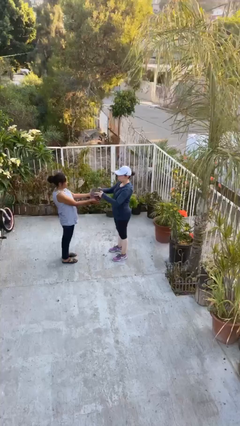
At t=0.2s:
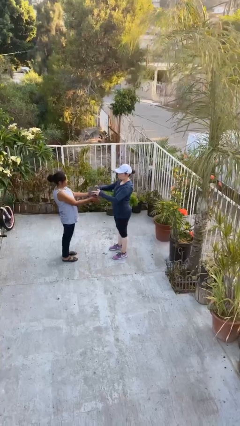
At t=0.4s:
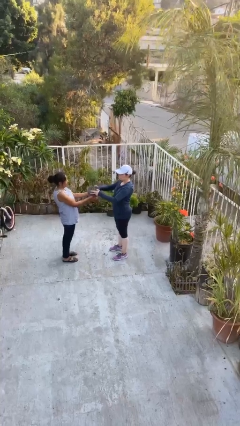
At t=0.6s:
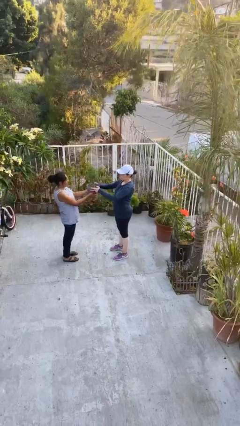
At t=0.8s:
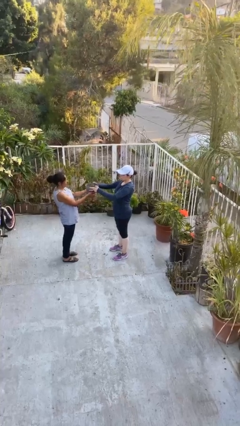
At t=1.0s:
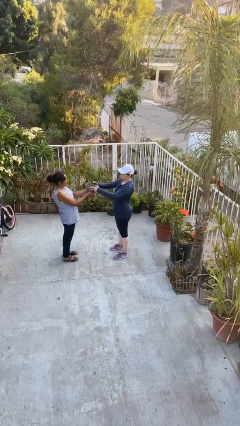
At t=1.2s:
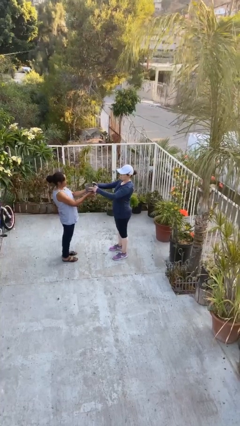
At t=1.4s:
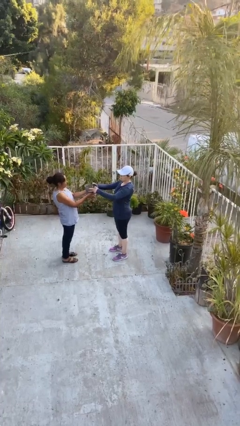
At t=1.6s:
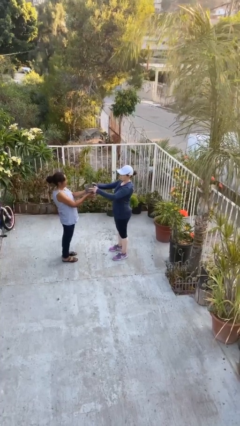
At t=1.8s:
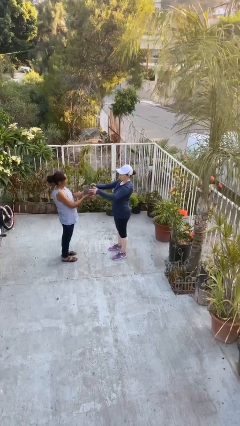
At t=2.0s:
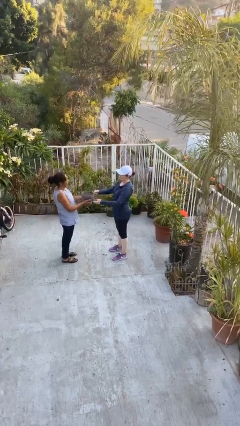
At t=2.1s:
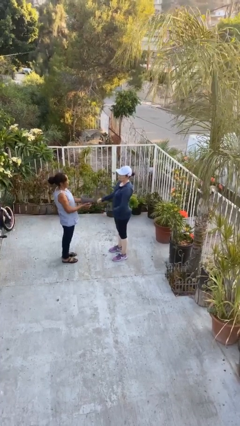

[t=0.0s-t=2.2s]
person transfers object to person

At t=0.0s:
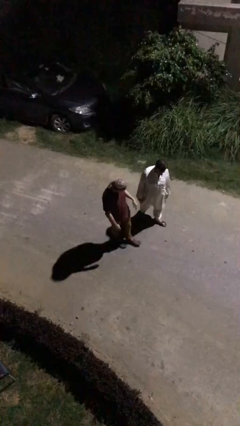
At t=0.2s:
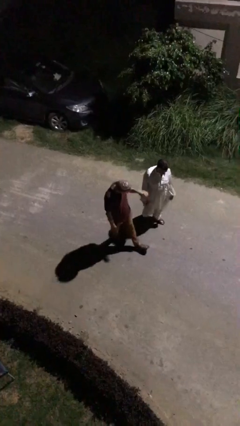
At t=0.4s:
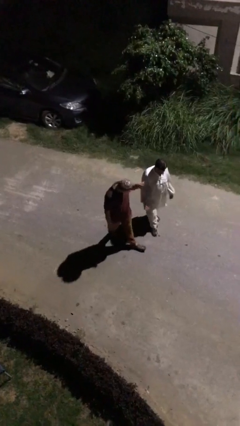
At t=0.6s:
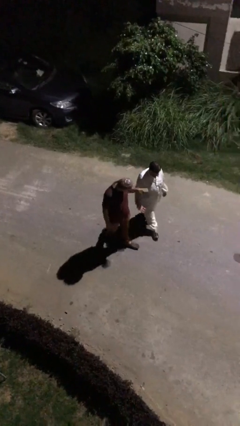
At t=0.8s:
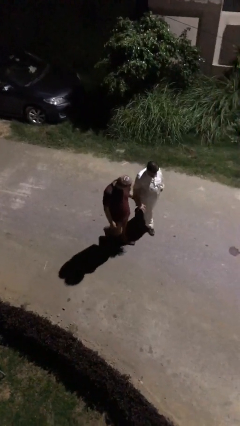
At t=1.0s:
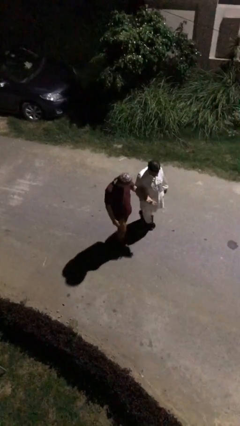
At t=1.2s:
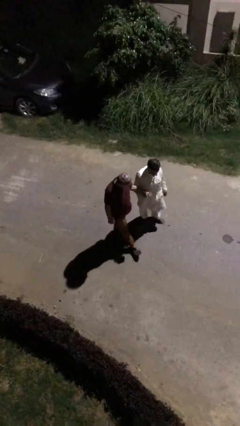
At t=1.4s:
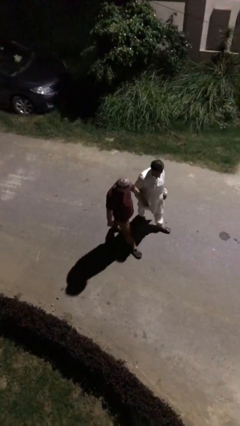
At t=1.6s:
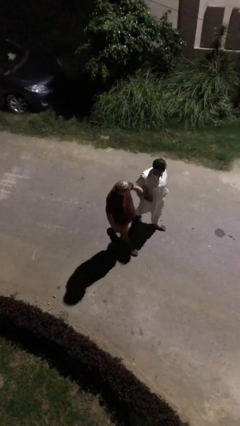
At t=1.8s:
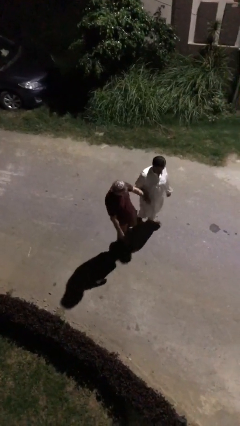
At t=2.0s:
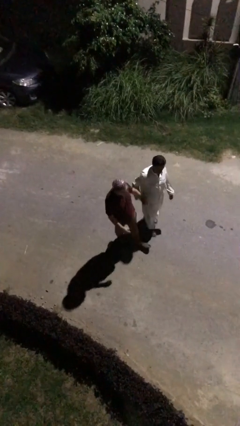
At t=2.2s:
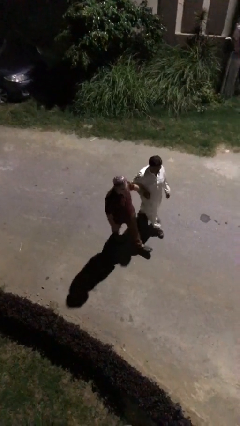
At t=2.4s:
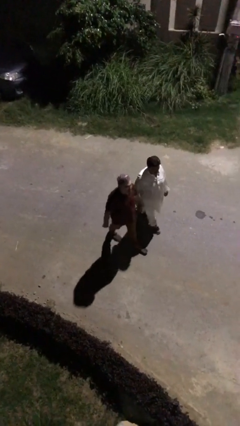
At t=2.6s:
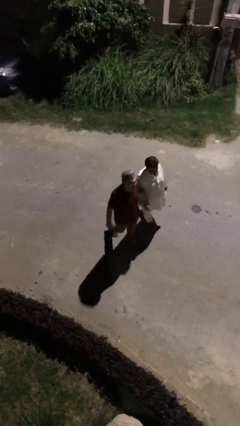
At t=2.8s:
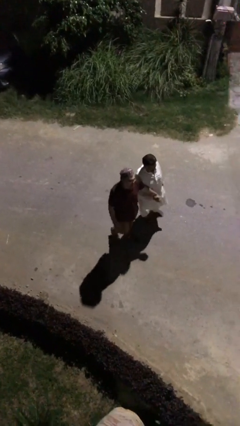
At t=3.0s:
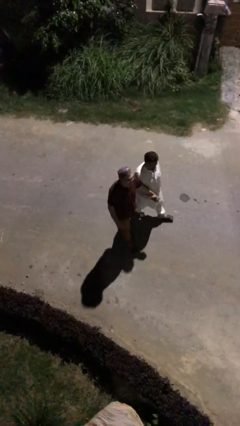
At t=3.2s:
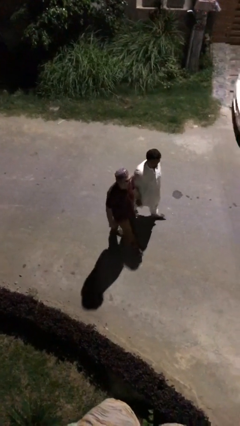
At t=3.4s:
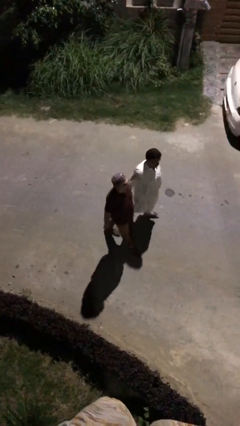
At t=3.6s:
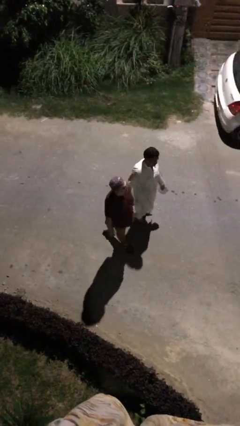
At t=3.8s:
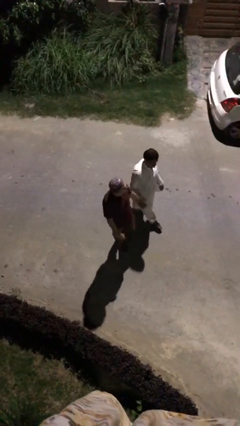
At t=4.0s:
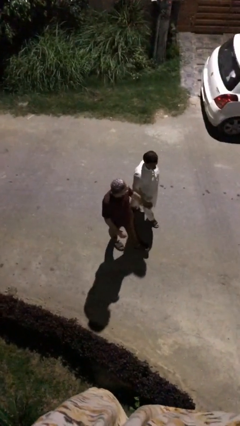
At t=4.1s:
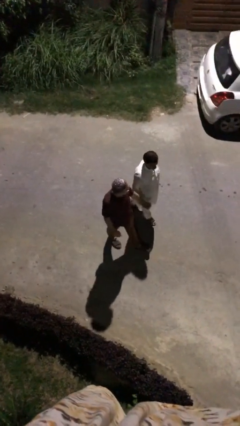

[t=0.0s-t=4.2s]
person holds hand

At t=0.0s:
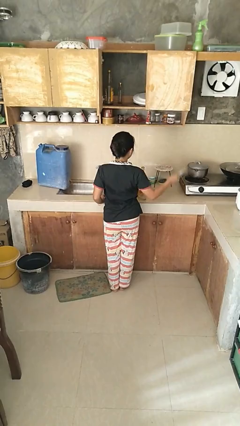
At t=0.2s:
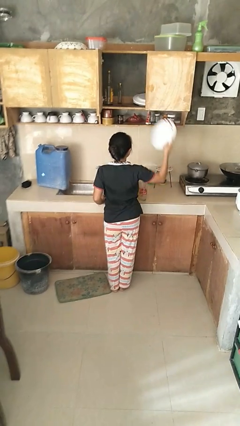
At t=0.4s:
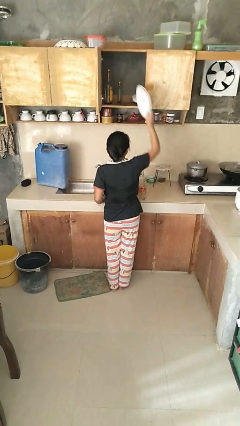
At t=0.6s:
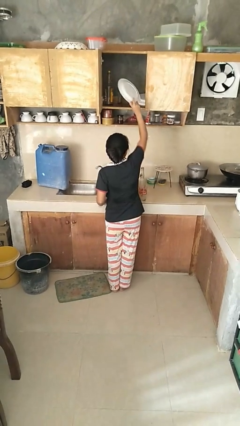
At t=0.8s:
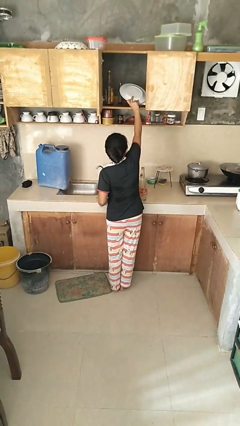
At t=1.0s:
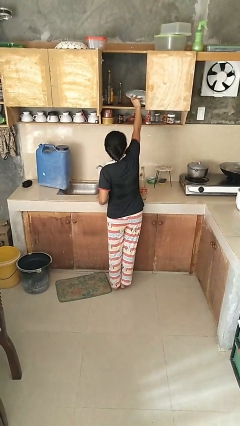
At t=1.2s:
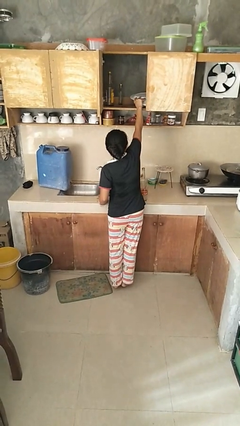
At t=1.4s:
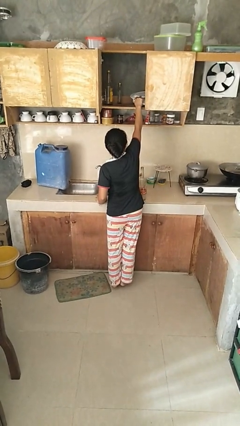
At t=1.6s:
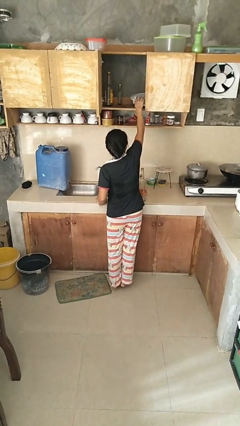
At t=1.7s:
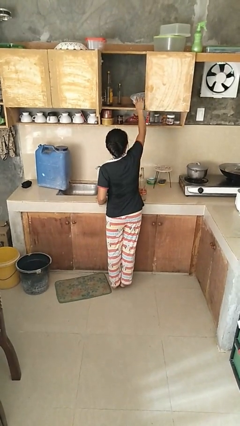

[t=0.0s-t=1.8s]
person puts object in cabinet

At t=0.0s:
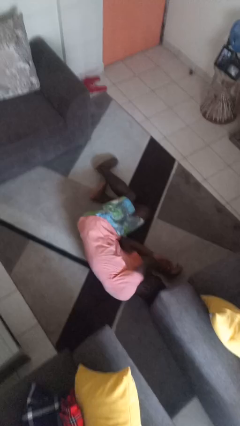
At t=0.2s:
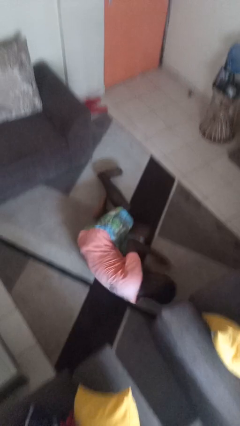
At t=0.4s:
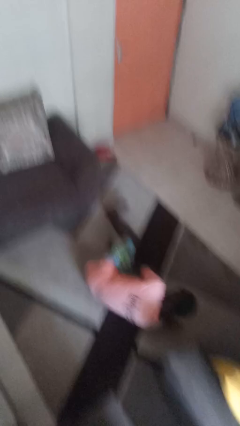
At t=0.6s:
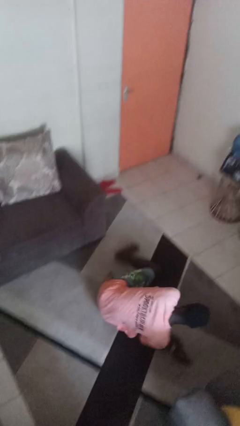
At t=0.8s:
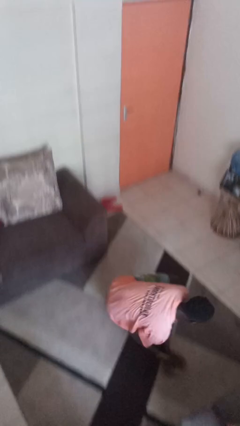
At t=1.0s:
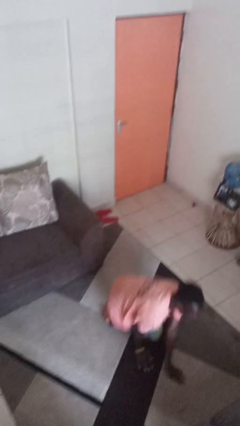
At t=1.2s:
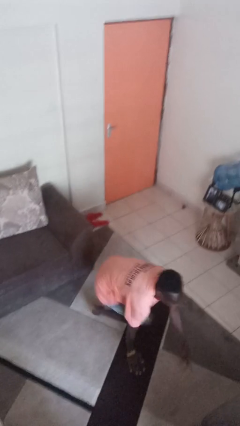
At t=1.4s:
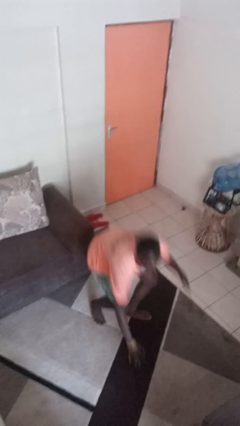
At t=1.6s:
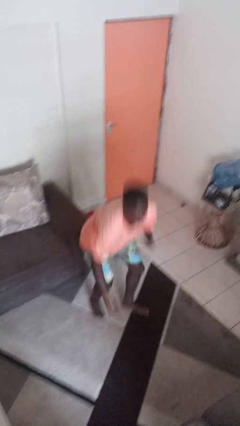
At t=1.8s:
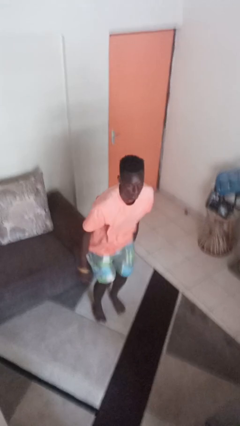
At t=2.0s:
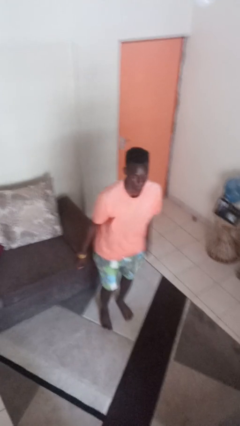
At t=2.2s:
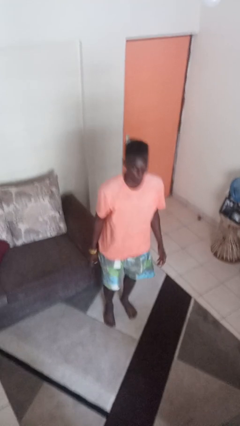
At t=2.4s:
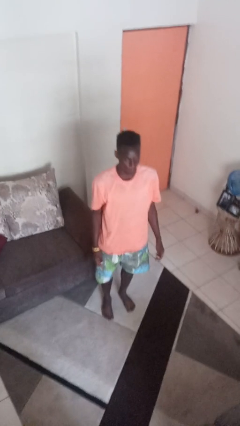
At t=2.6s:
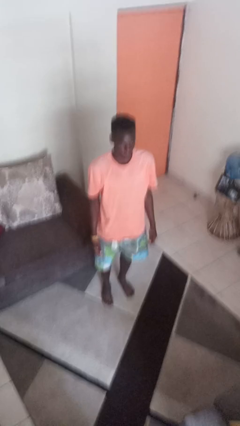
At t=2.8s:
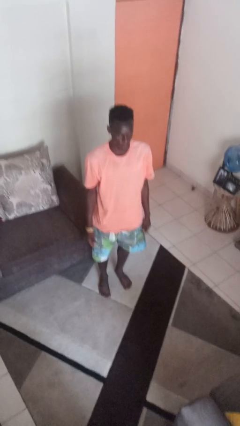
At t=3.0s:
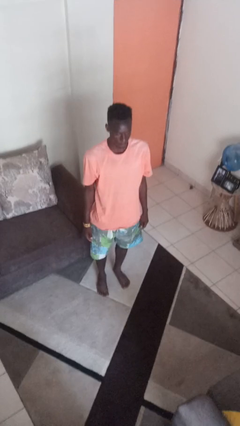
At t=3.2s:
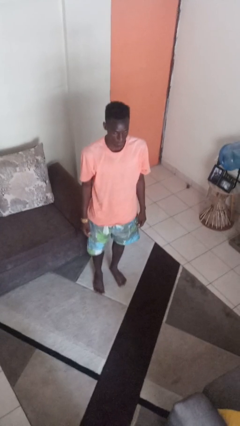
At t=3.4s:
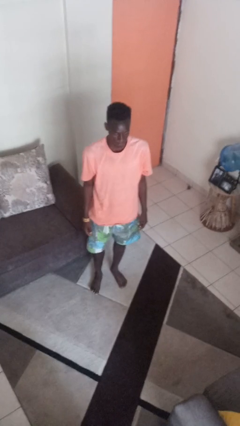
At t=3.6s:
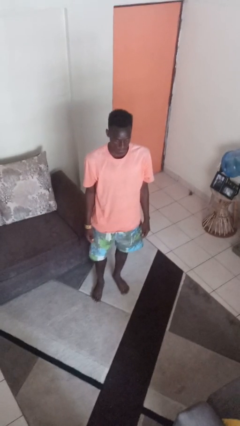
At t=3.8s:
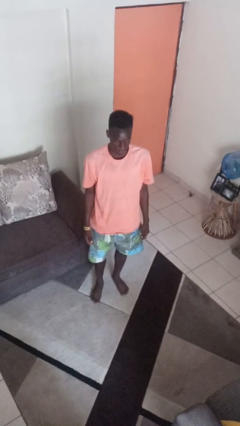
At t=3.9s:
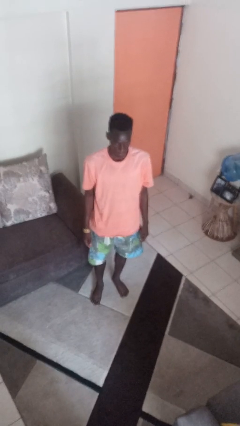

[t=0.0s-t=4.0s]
person stands up from floor

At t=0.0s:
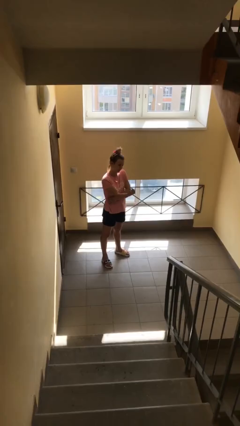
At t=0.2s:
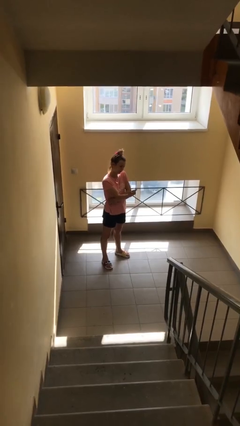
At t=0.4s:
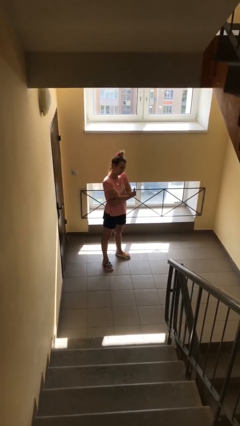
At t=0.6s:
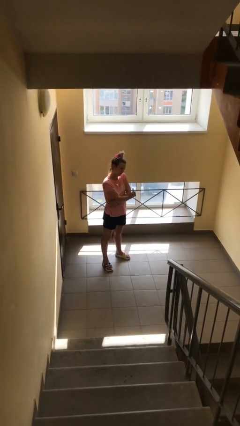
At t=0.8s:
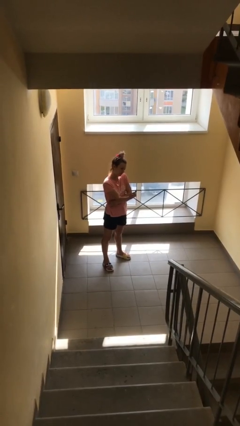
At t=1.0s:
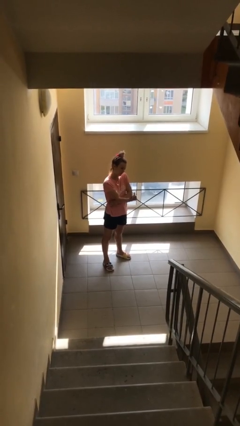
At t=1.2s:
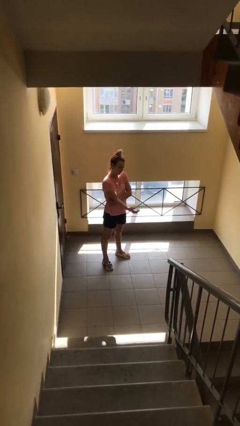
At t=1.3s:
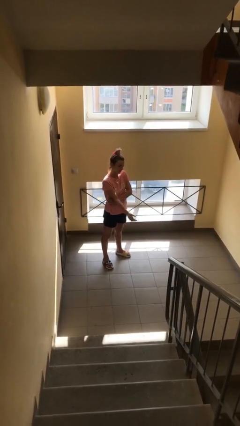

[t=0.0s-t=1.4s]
person gestures come here

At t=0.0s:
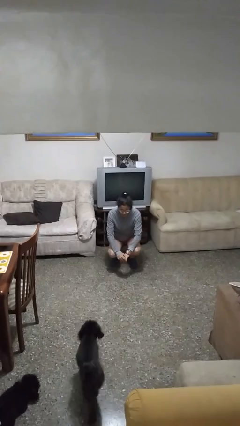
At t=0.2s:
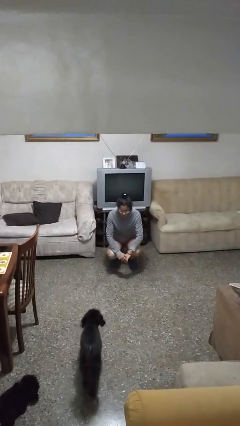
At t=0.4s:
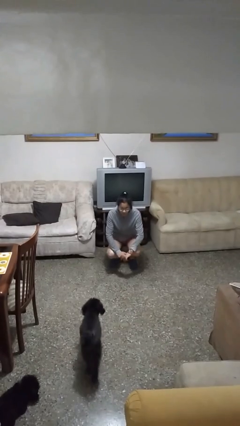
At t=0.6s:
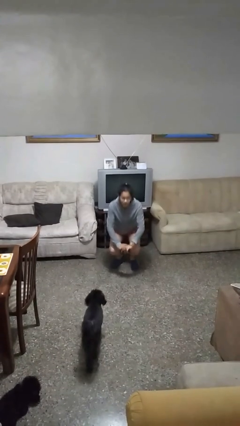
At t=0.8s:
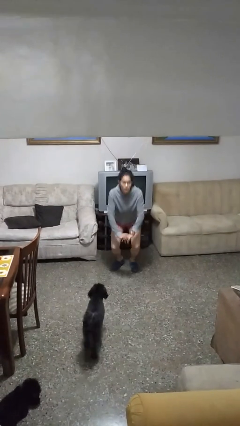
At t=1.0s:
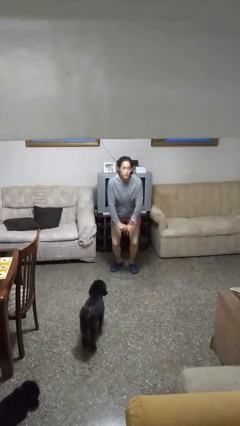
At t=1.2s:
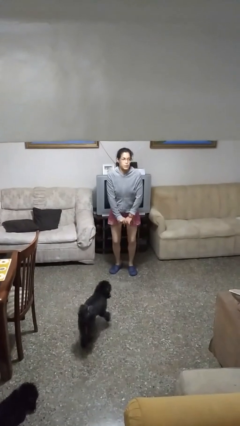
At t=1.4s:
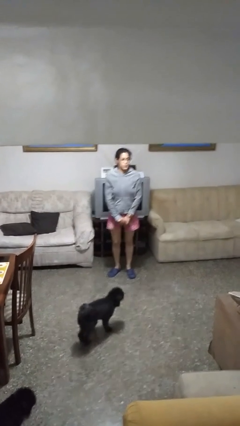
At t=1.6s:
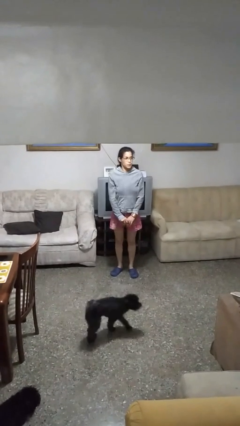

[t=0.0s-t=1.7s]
person stands up

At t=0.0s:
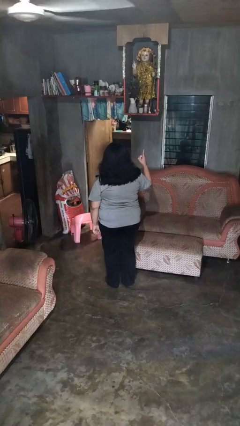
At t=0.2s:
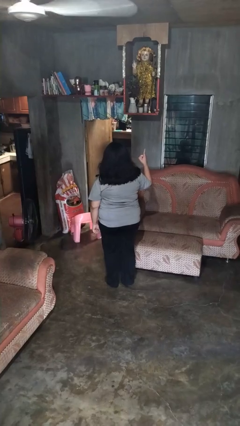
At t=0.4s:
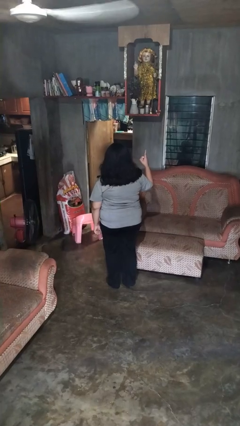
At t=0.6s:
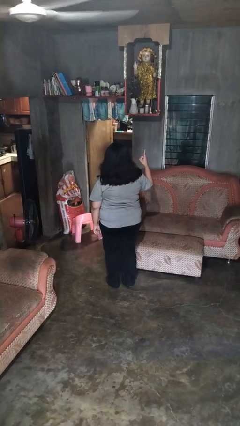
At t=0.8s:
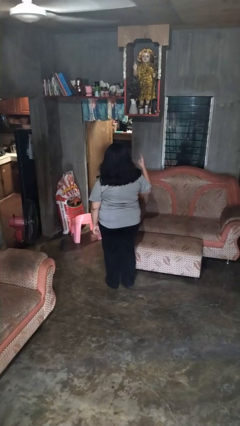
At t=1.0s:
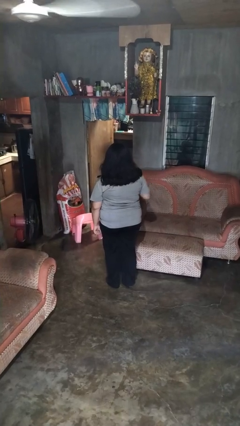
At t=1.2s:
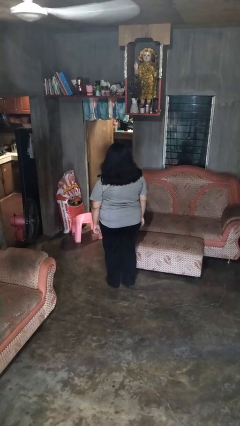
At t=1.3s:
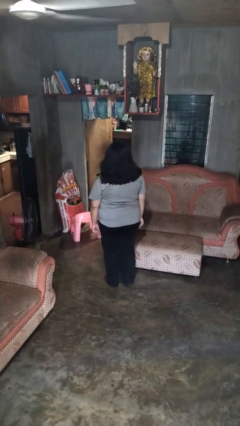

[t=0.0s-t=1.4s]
person gestures number one

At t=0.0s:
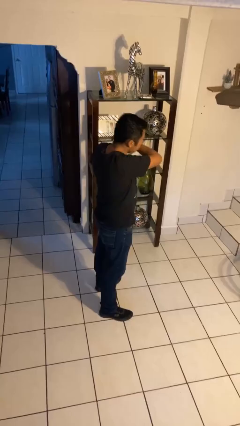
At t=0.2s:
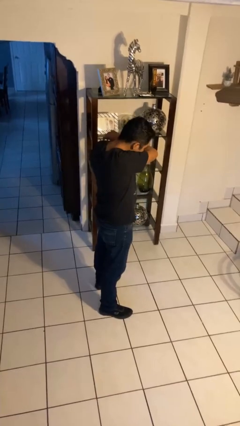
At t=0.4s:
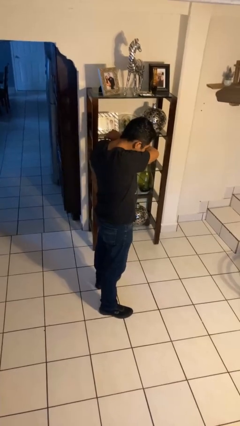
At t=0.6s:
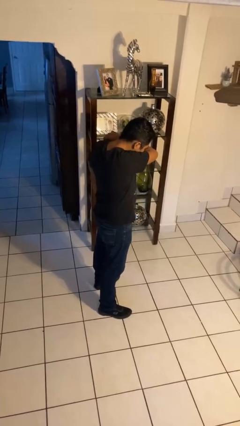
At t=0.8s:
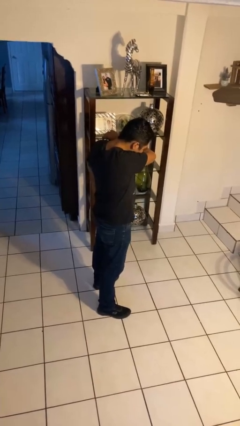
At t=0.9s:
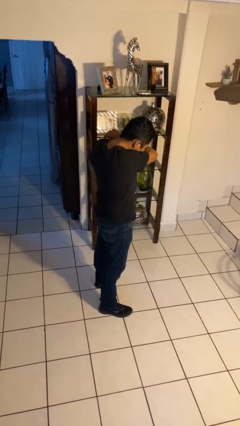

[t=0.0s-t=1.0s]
person sneezes into arm
